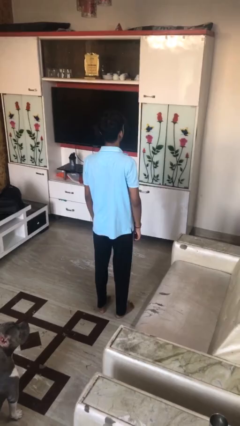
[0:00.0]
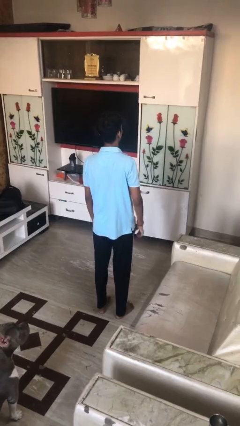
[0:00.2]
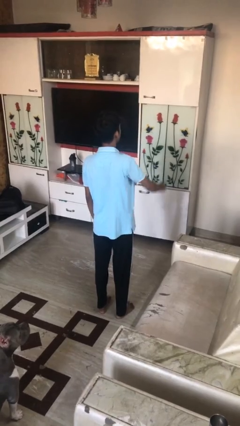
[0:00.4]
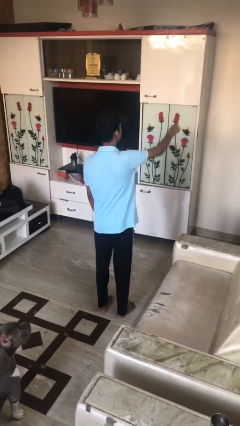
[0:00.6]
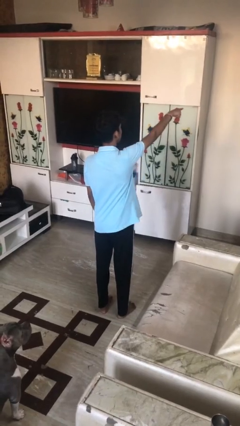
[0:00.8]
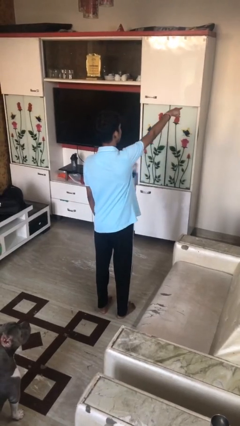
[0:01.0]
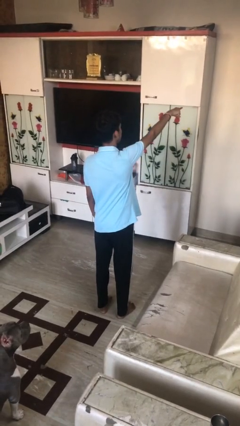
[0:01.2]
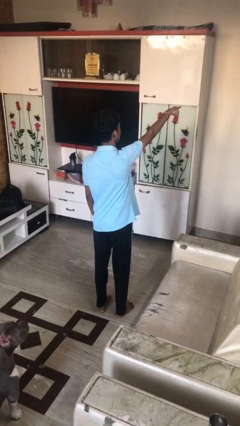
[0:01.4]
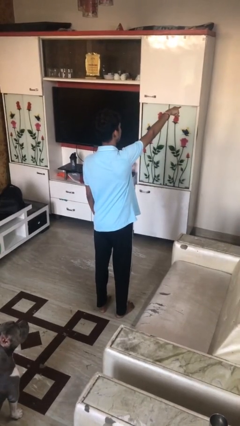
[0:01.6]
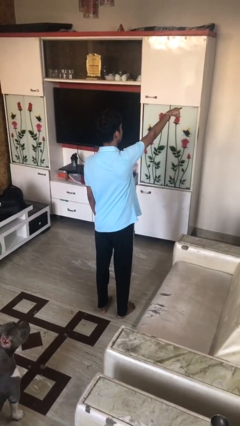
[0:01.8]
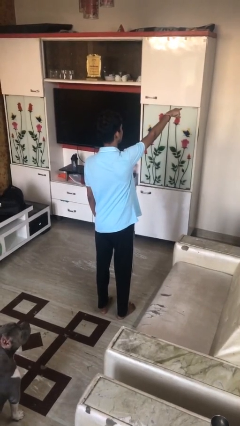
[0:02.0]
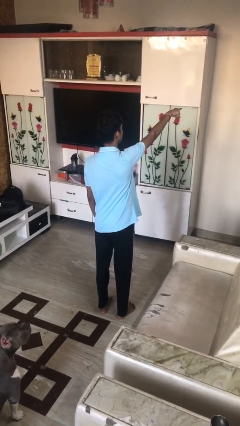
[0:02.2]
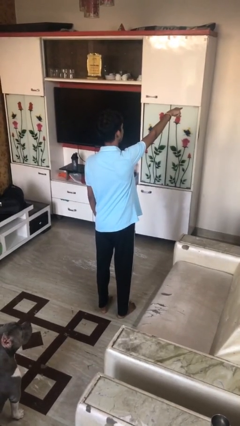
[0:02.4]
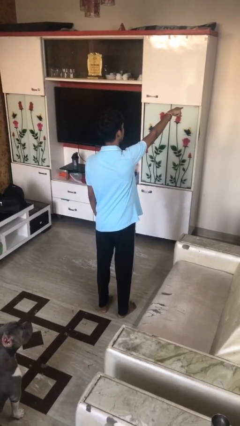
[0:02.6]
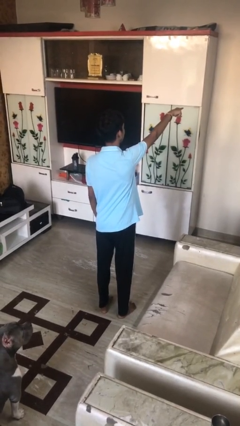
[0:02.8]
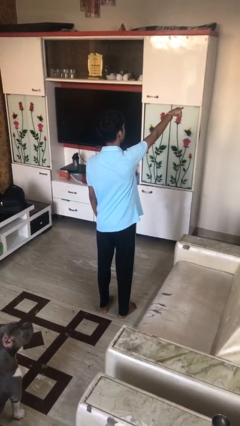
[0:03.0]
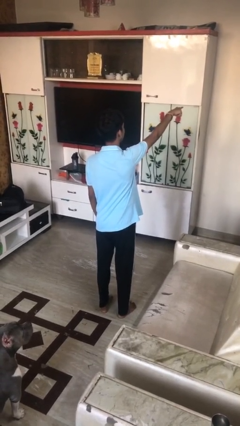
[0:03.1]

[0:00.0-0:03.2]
person points at person

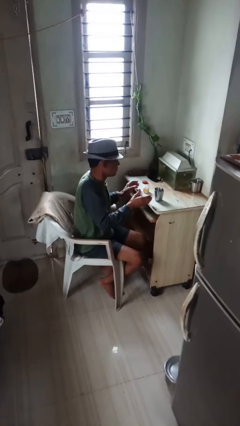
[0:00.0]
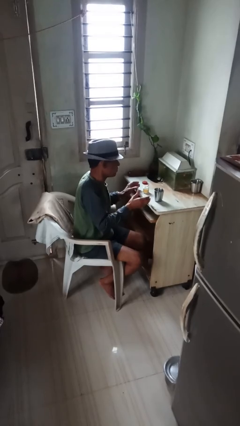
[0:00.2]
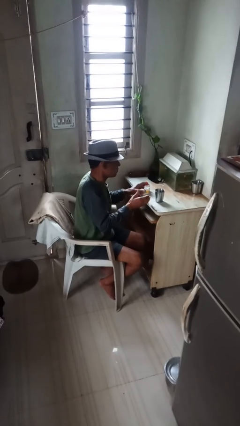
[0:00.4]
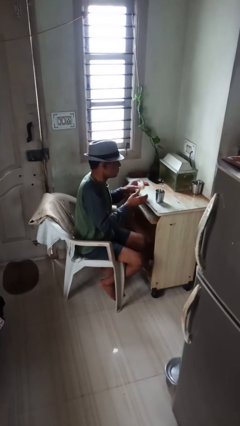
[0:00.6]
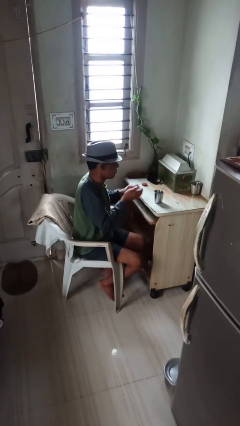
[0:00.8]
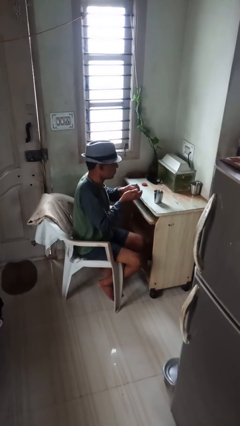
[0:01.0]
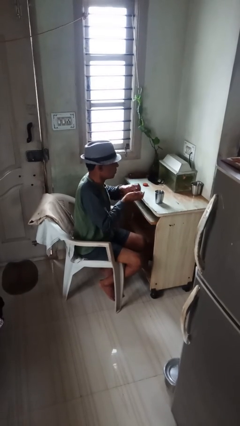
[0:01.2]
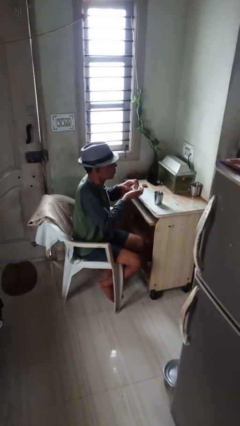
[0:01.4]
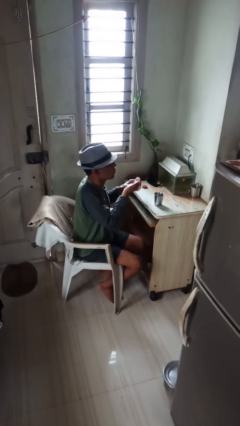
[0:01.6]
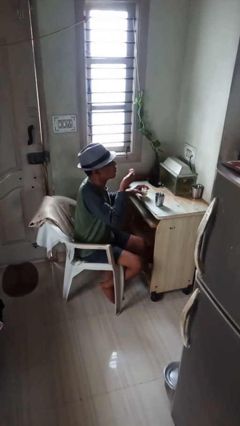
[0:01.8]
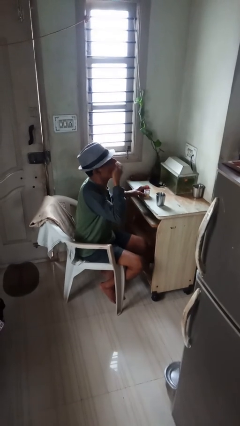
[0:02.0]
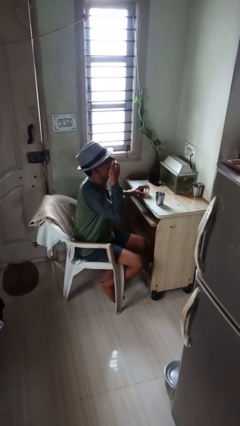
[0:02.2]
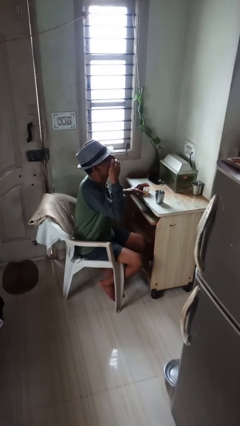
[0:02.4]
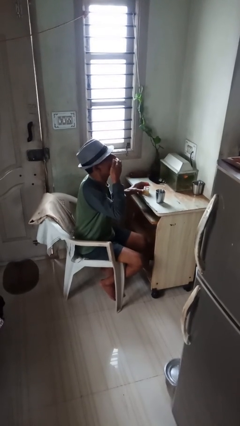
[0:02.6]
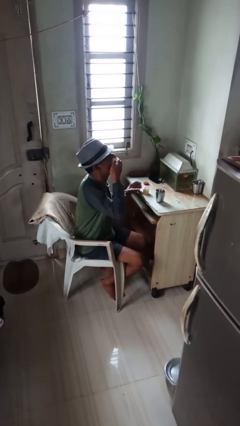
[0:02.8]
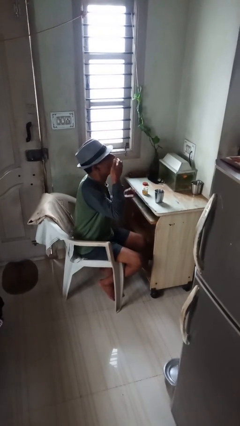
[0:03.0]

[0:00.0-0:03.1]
person takes medicine pills

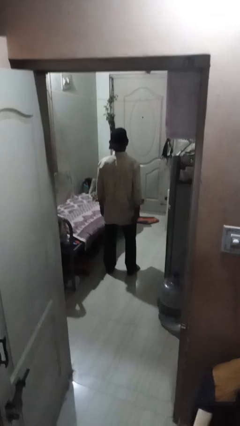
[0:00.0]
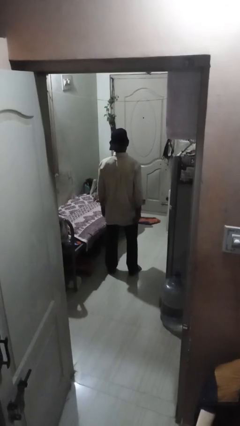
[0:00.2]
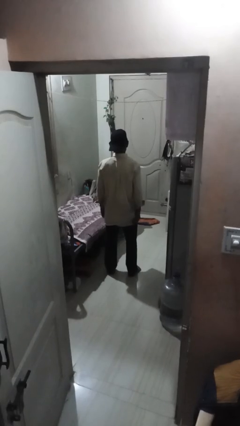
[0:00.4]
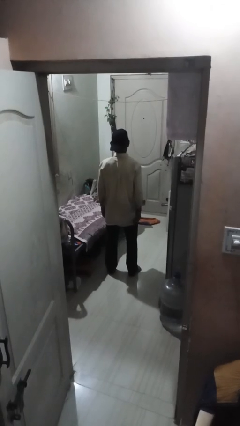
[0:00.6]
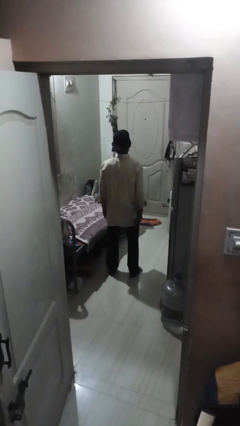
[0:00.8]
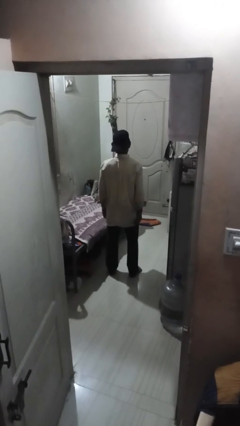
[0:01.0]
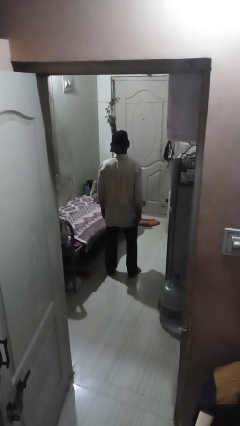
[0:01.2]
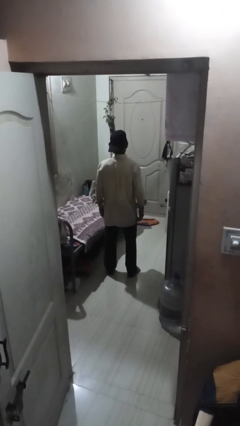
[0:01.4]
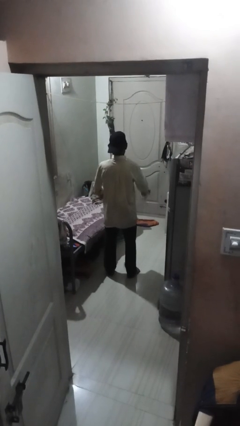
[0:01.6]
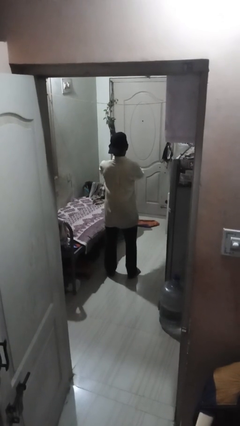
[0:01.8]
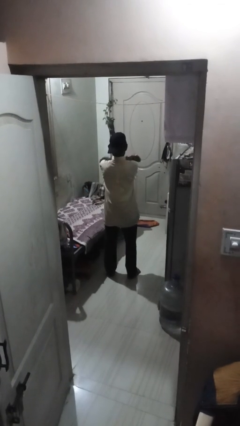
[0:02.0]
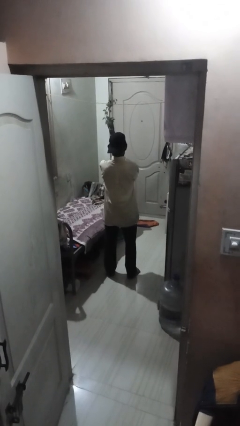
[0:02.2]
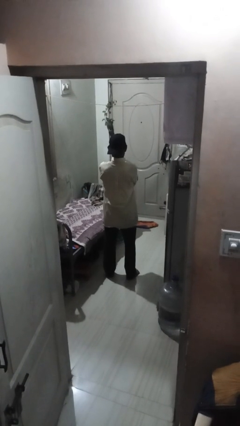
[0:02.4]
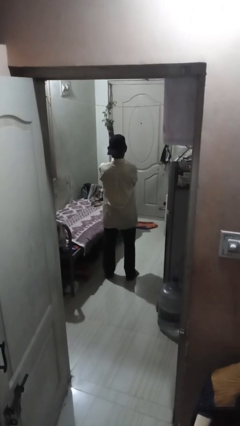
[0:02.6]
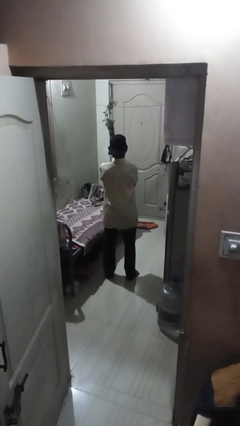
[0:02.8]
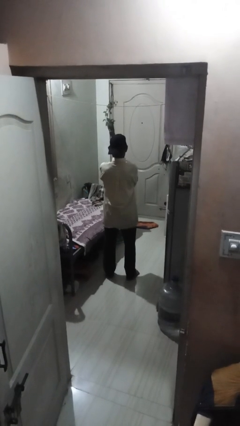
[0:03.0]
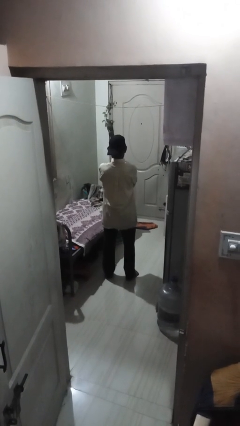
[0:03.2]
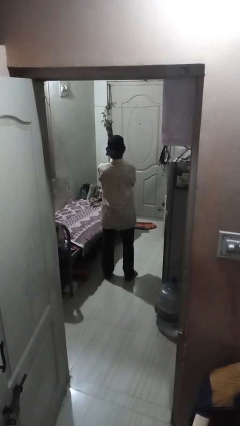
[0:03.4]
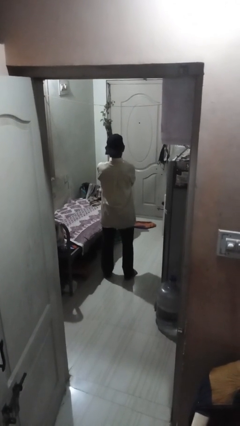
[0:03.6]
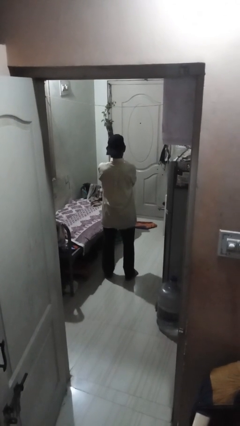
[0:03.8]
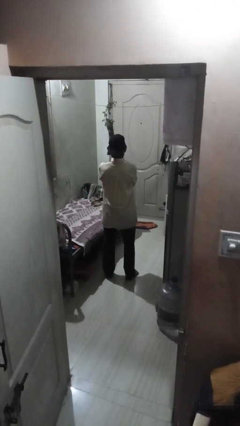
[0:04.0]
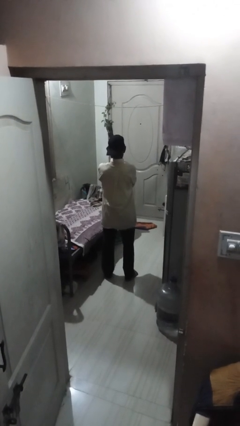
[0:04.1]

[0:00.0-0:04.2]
person crosses arms

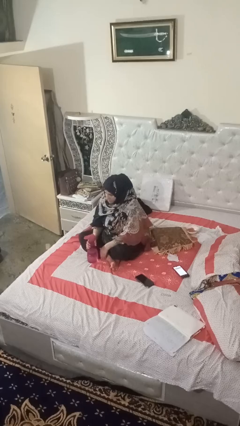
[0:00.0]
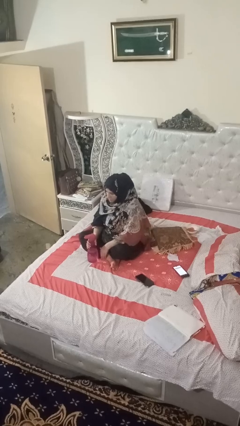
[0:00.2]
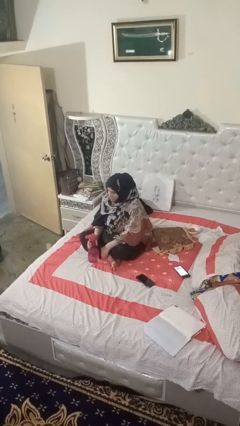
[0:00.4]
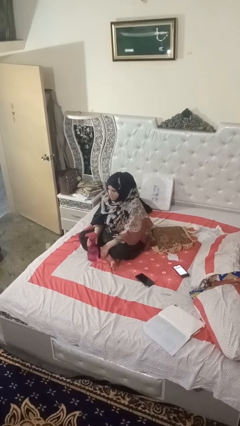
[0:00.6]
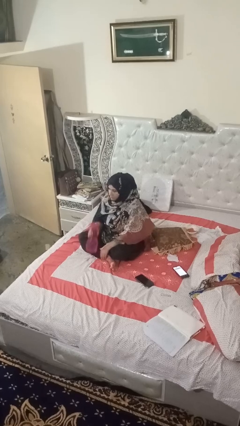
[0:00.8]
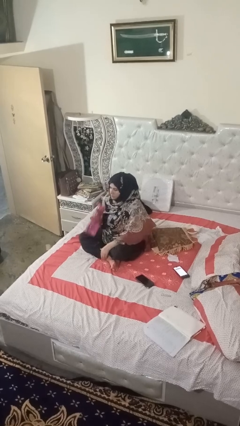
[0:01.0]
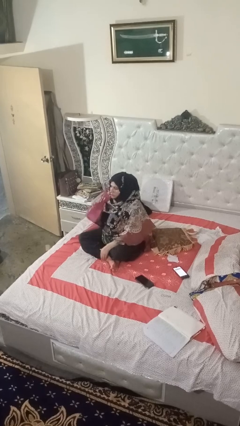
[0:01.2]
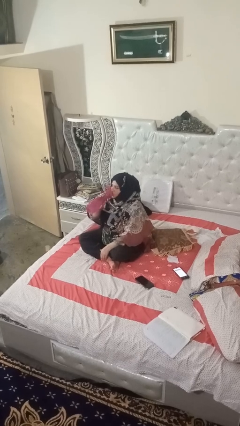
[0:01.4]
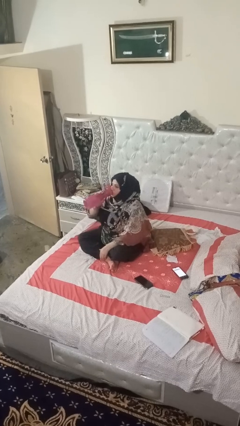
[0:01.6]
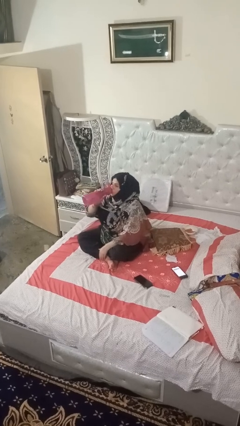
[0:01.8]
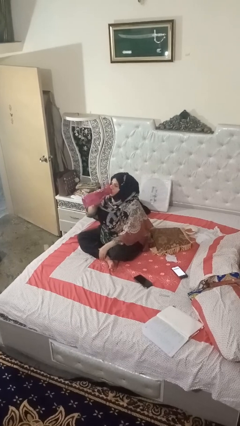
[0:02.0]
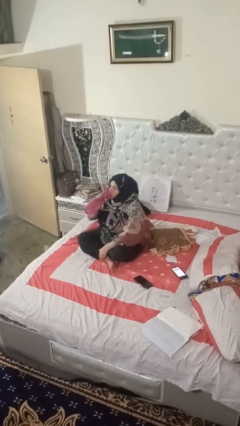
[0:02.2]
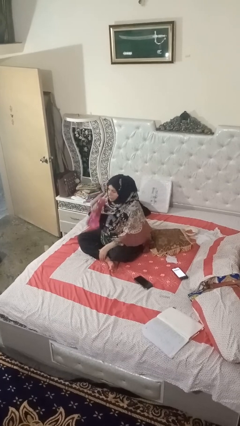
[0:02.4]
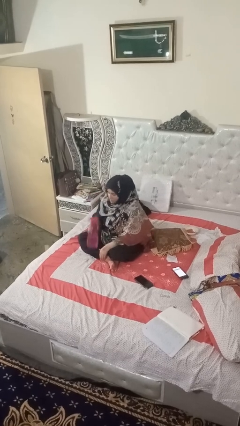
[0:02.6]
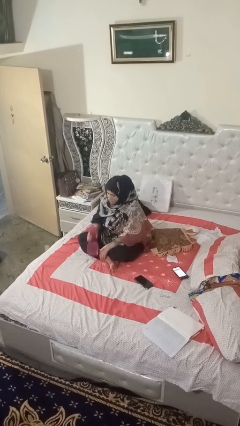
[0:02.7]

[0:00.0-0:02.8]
person drinks from bottle

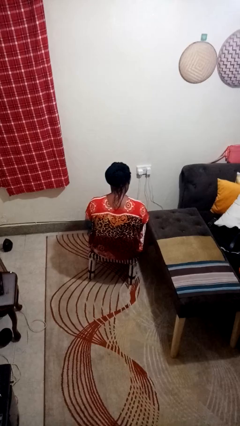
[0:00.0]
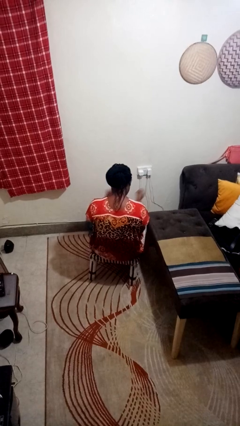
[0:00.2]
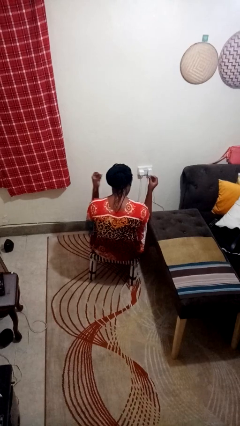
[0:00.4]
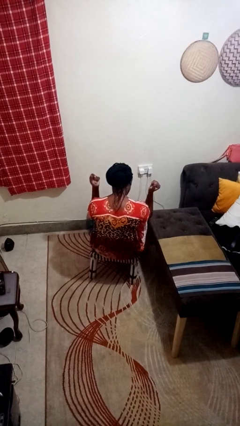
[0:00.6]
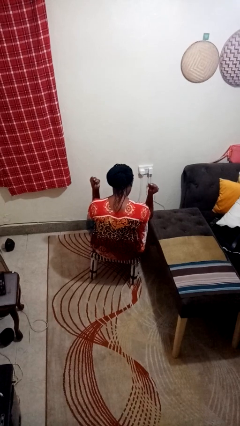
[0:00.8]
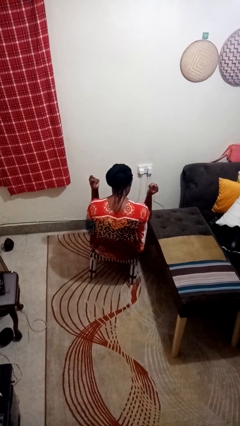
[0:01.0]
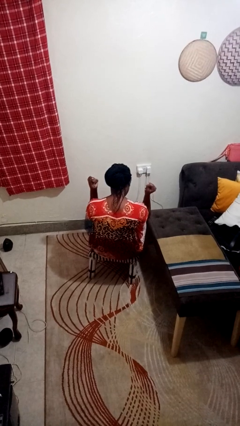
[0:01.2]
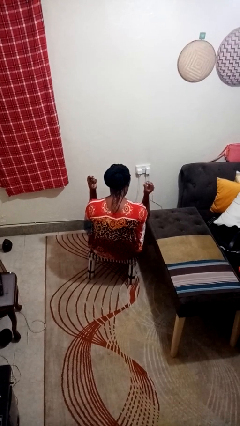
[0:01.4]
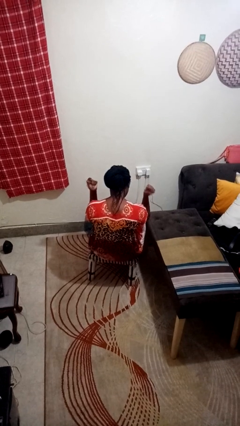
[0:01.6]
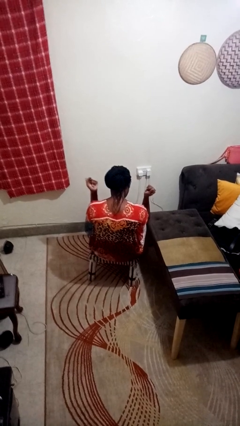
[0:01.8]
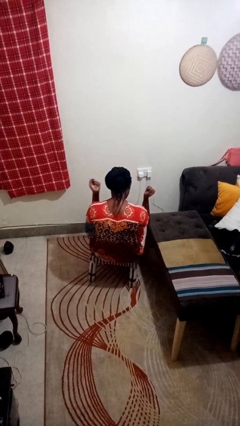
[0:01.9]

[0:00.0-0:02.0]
person snaps fingers

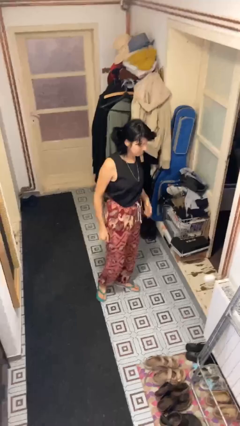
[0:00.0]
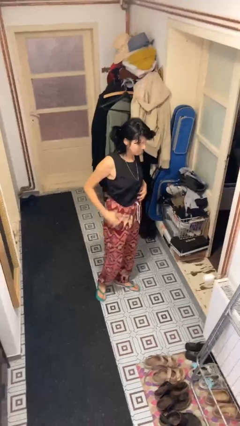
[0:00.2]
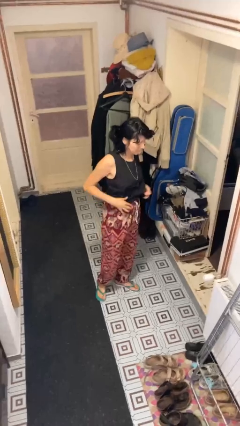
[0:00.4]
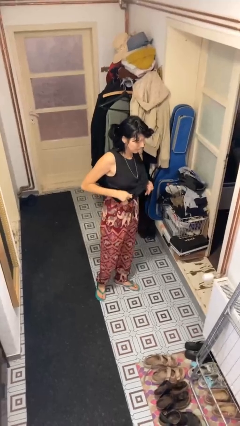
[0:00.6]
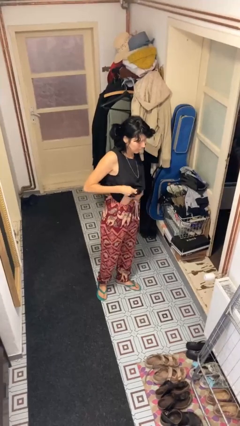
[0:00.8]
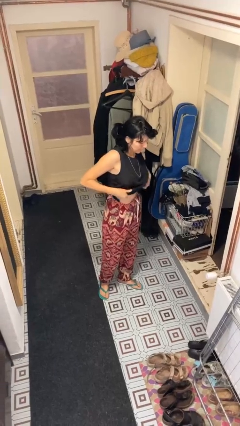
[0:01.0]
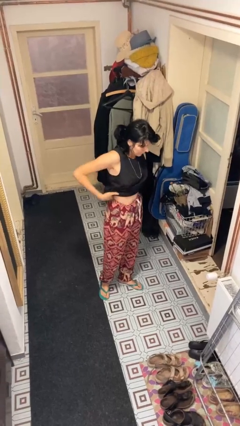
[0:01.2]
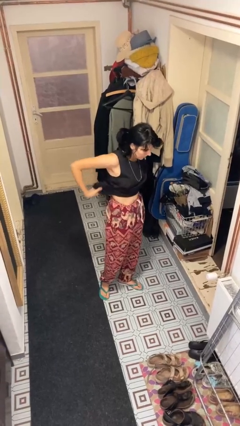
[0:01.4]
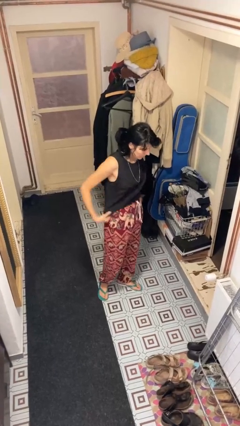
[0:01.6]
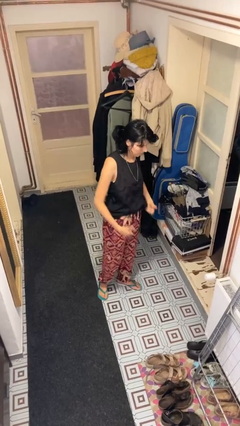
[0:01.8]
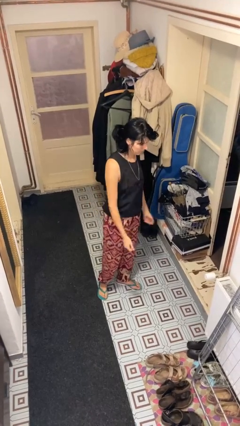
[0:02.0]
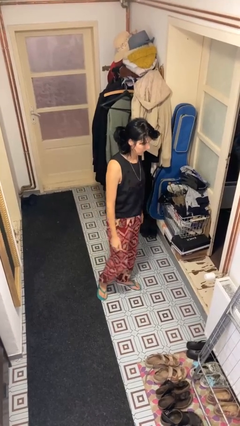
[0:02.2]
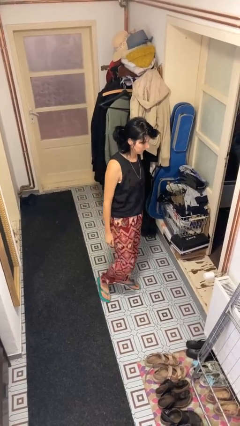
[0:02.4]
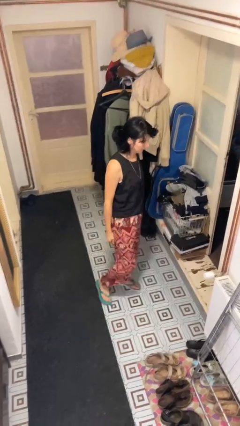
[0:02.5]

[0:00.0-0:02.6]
person untucks shirt
